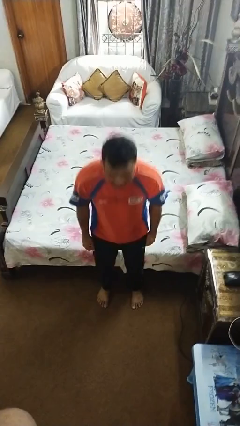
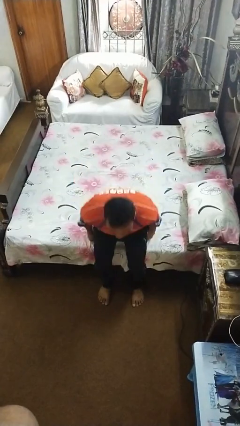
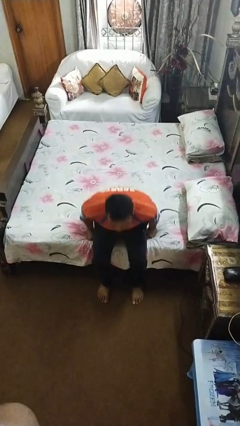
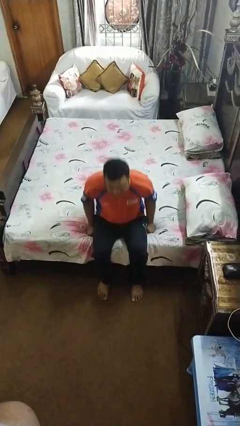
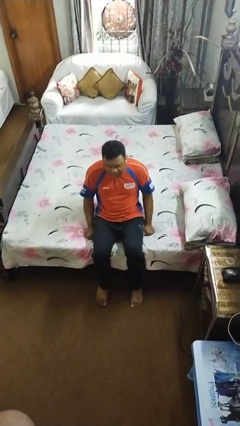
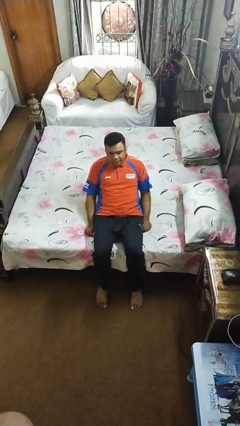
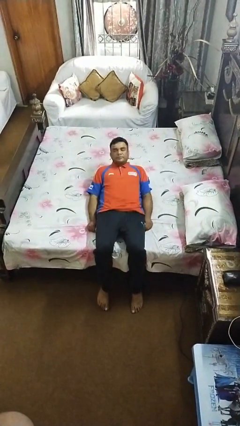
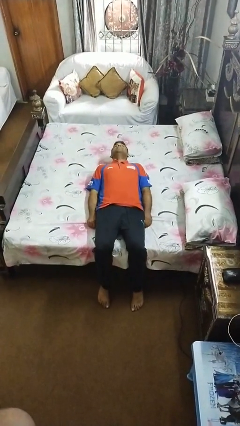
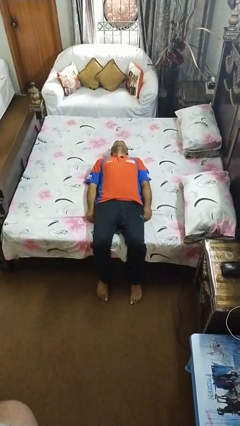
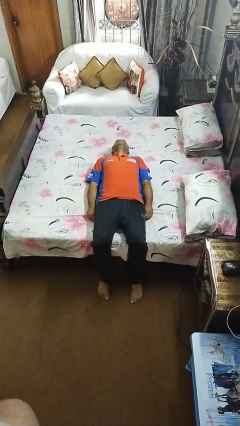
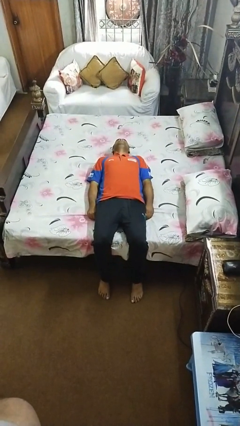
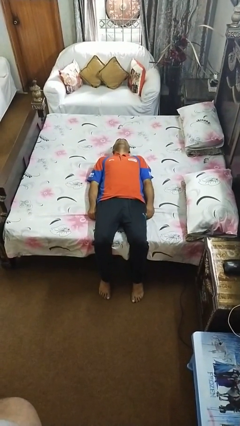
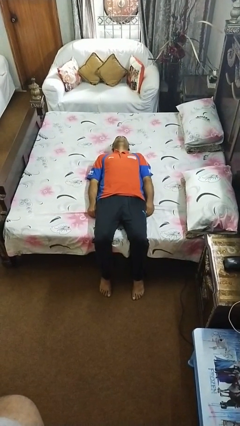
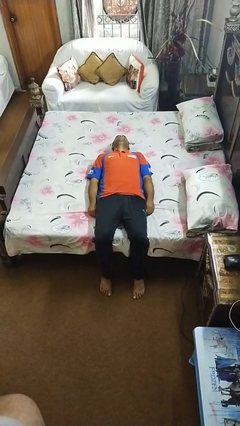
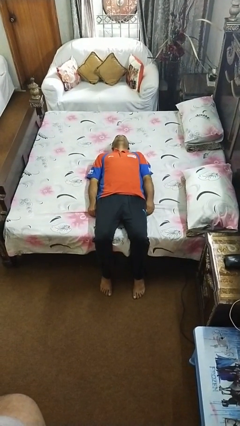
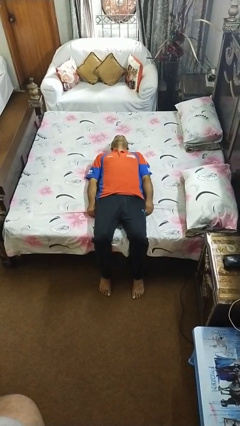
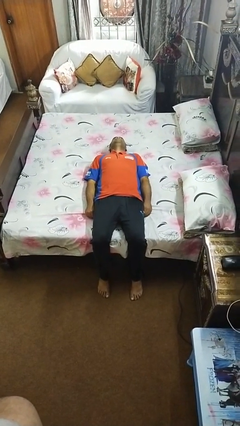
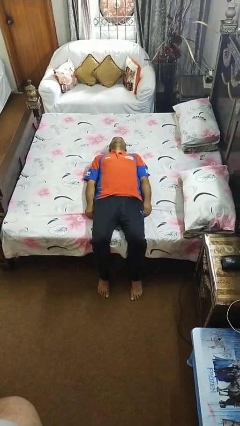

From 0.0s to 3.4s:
person lies down on bed

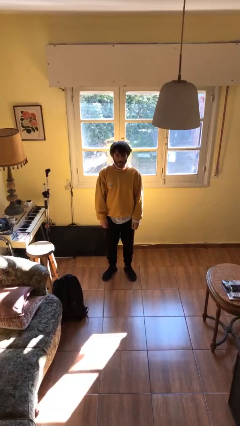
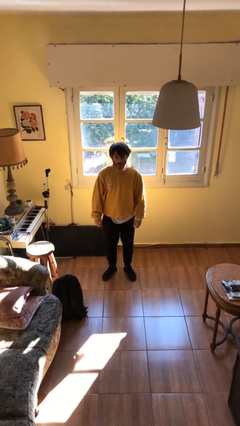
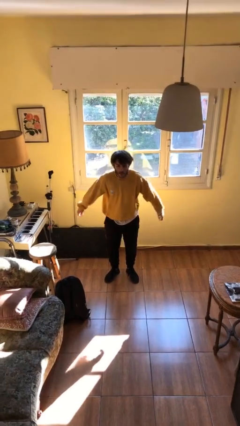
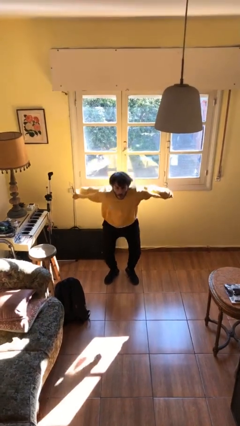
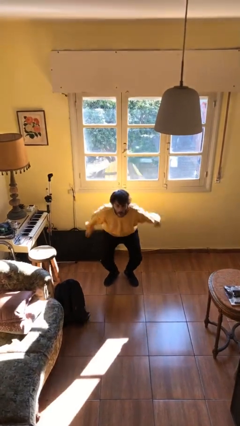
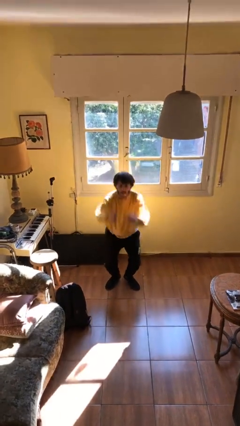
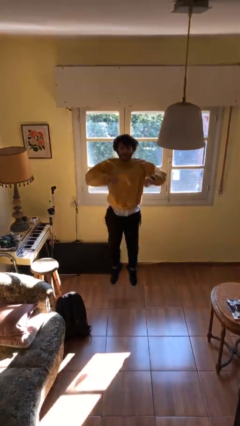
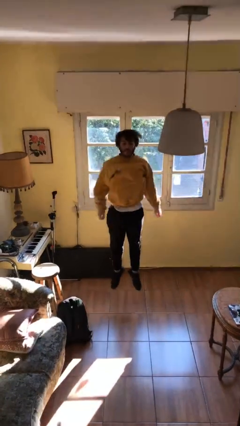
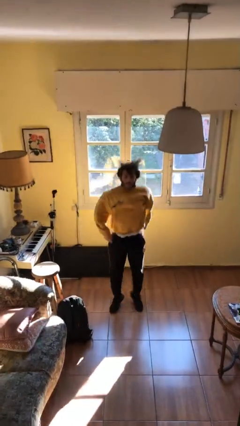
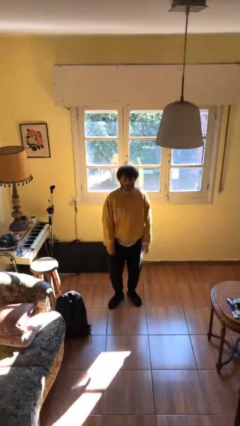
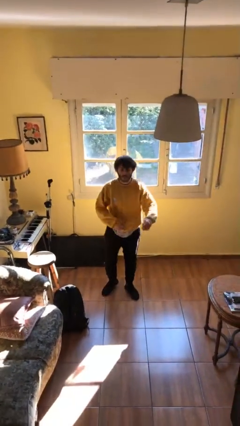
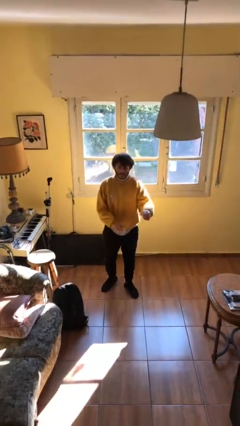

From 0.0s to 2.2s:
person jumps

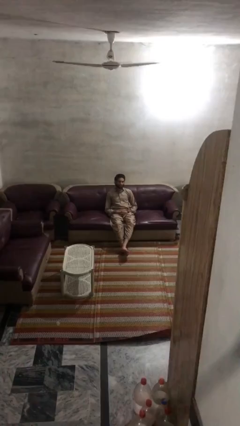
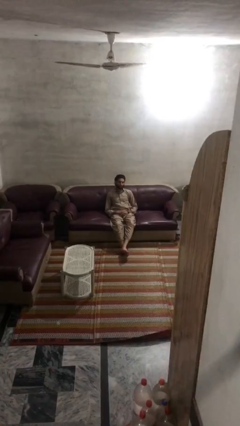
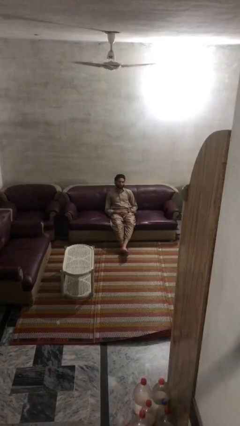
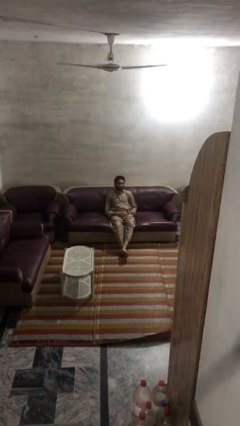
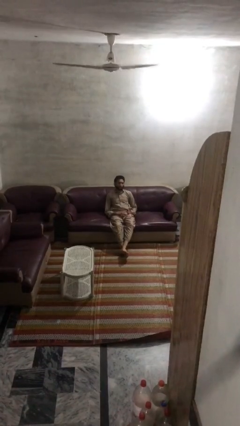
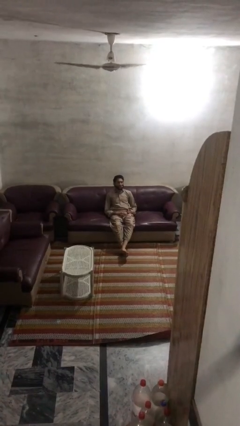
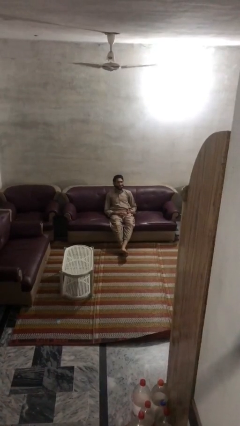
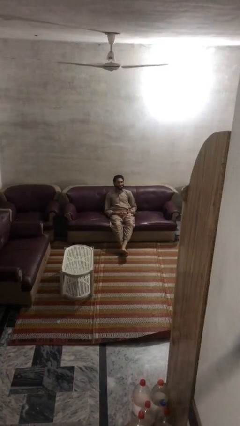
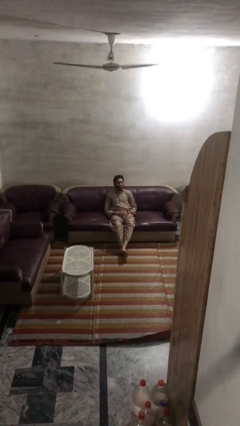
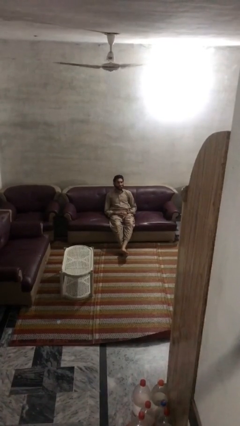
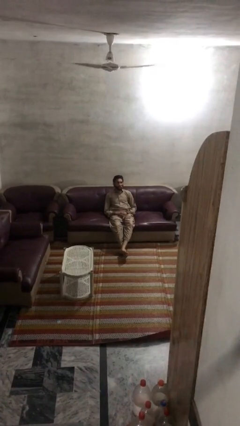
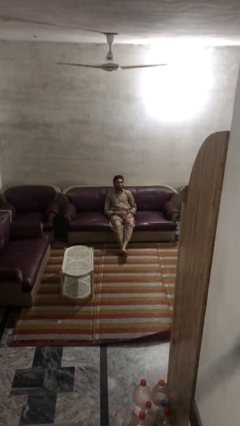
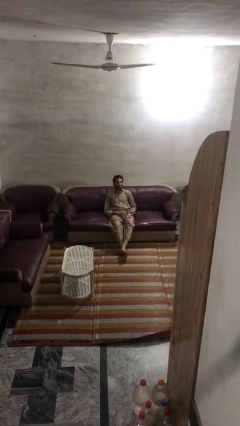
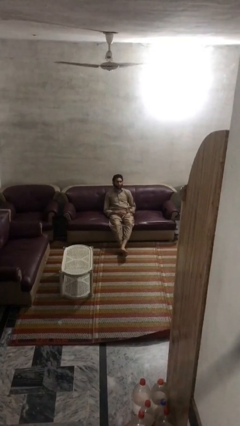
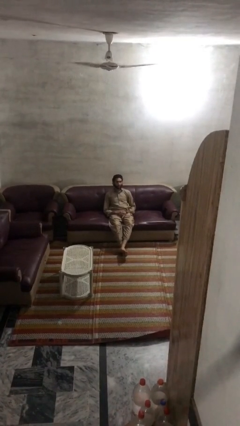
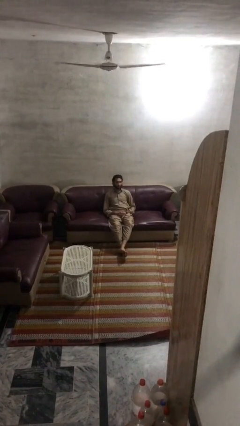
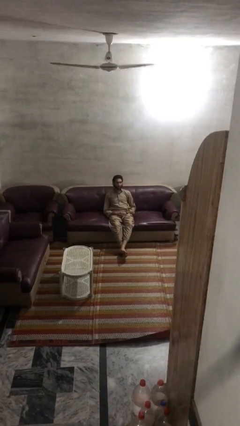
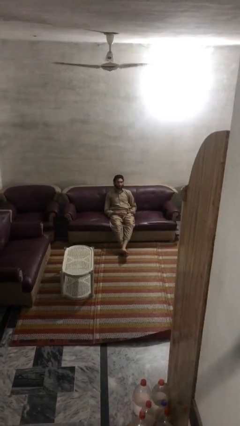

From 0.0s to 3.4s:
person sticks out tongue

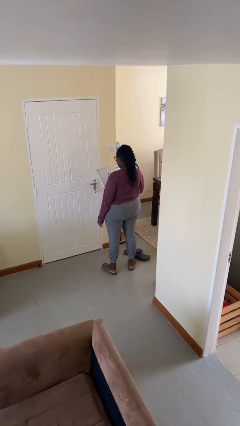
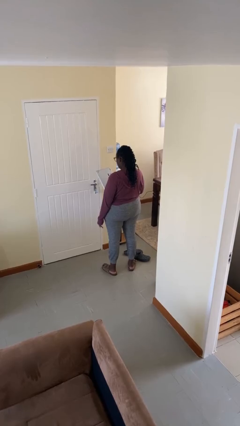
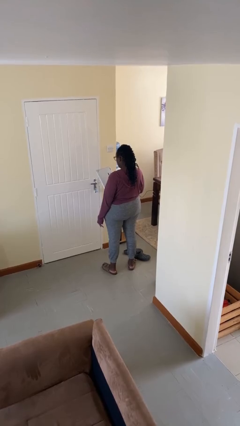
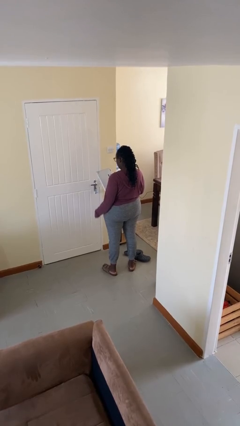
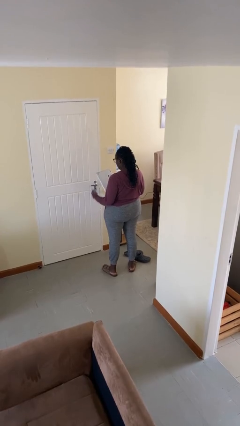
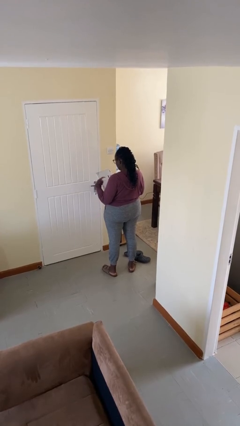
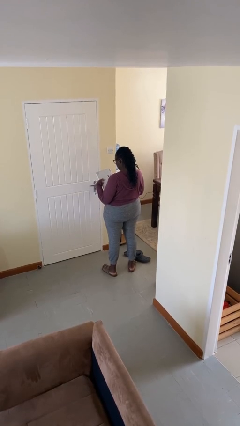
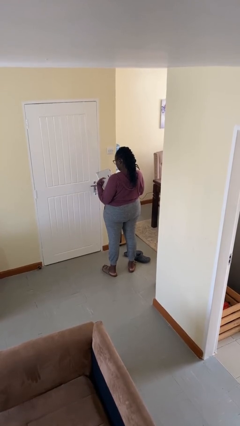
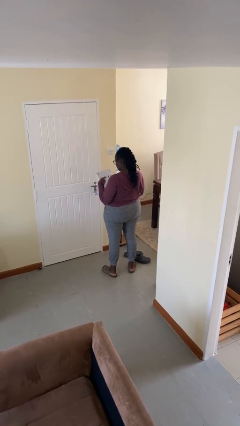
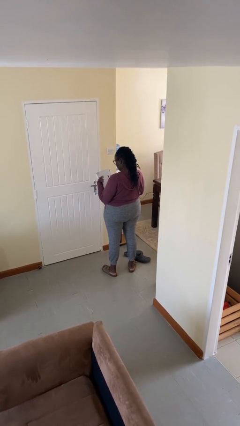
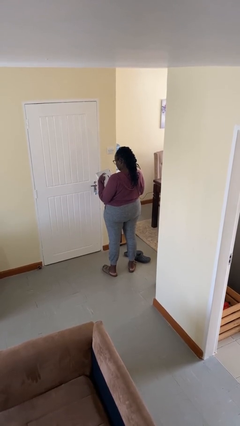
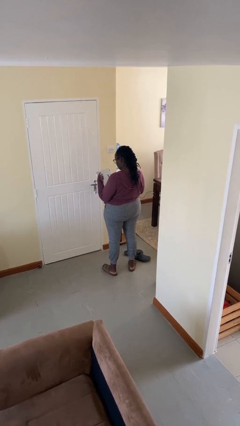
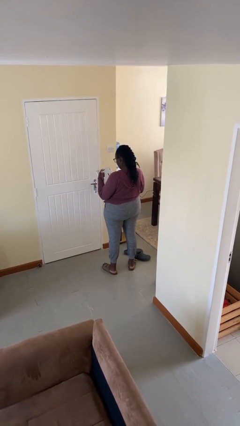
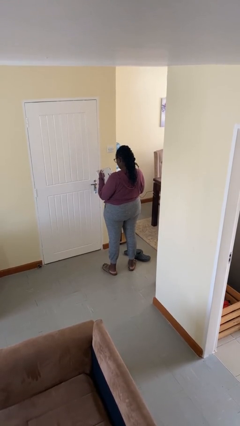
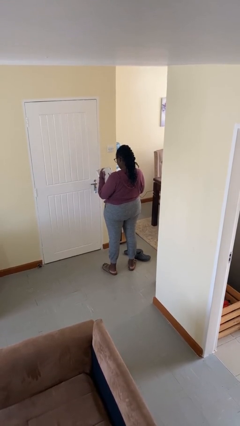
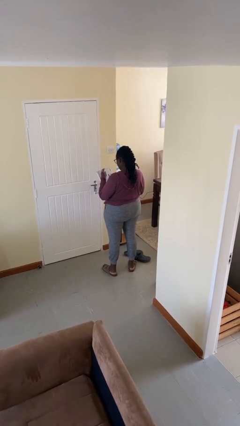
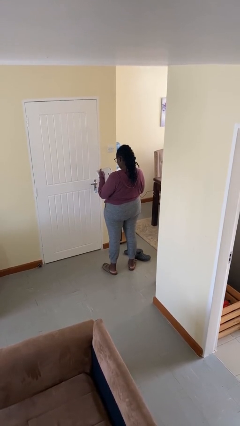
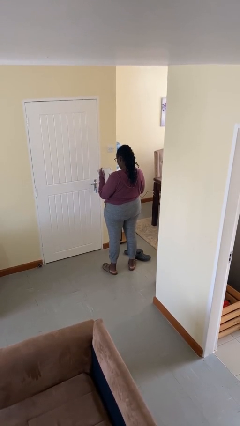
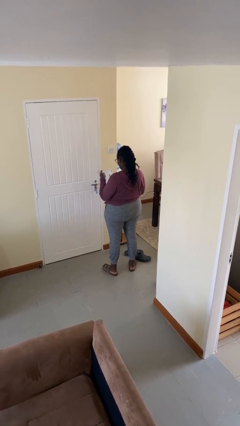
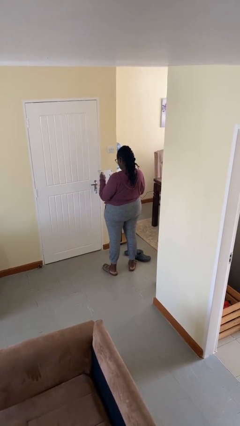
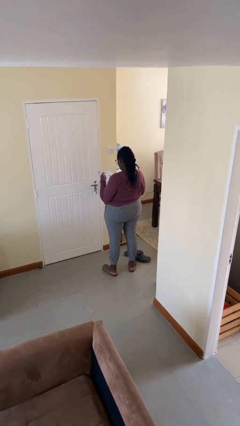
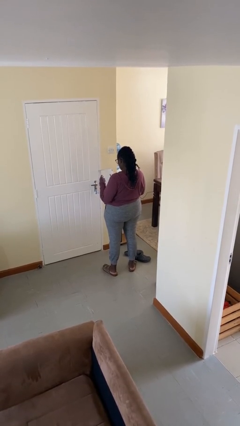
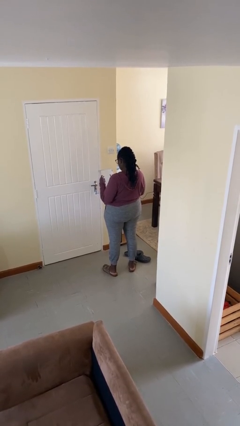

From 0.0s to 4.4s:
person taps object with finger

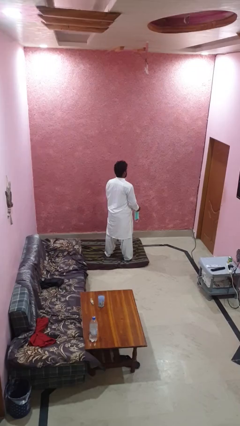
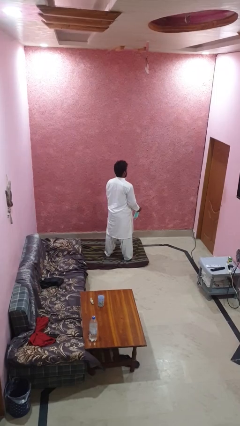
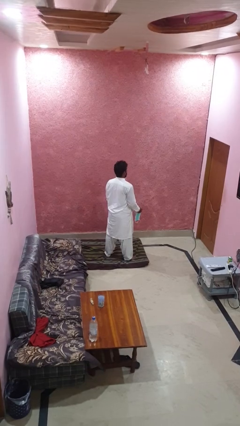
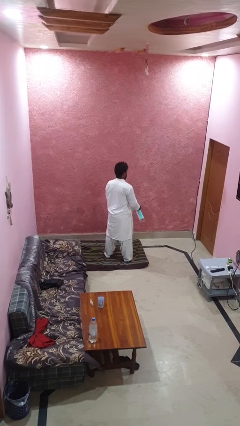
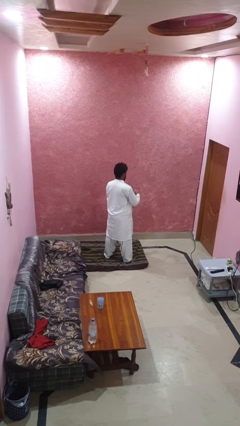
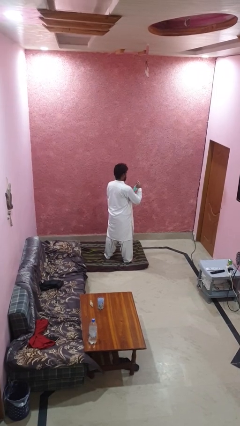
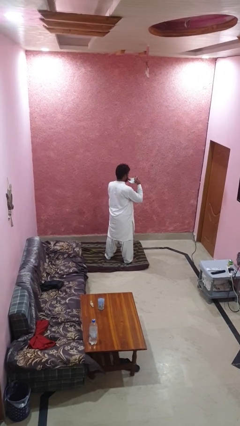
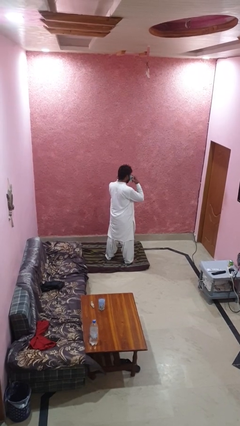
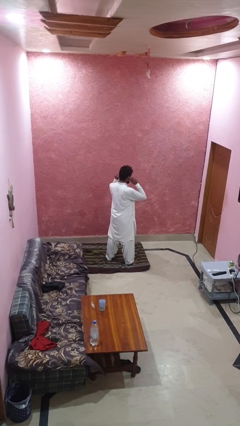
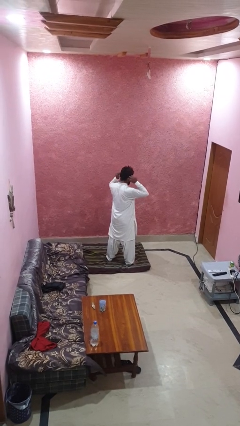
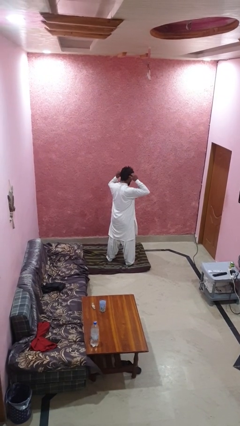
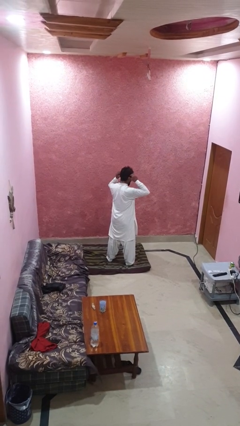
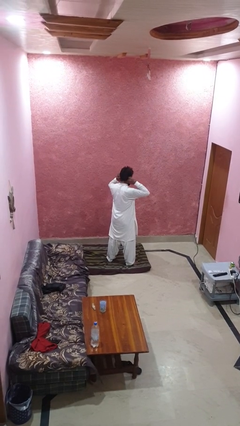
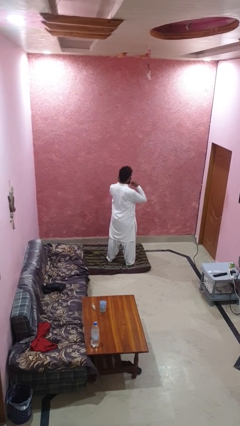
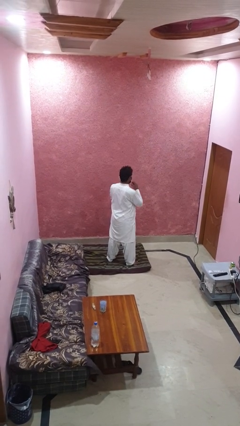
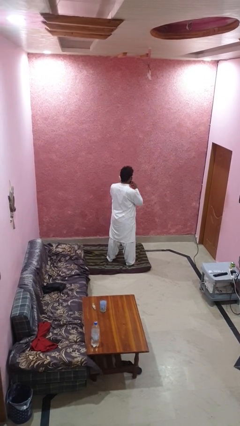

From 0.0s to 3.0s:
person puts on facemask

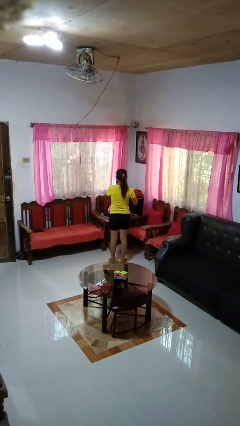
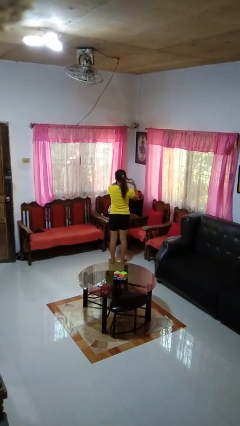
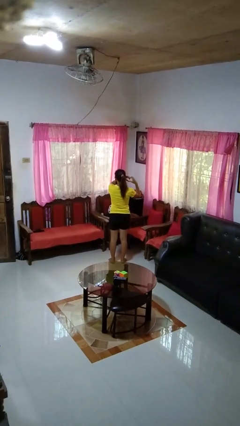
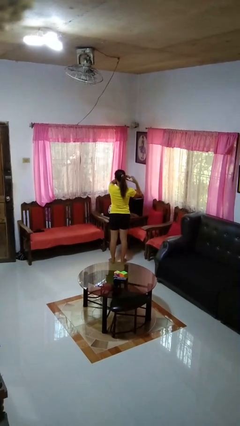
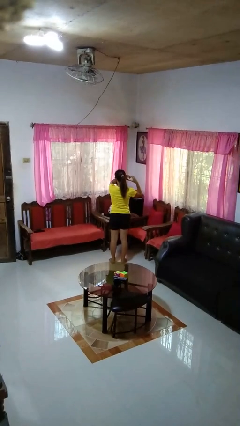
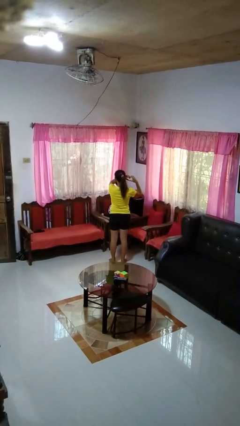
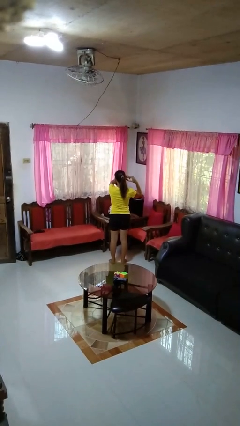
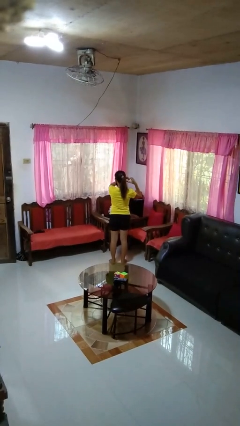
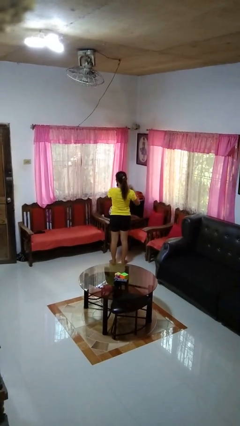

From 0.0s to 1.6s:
person gestures heart
